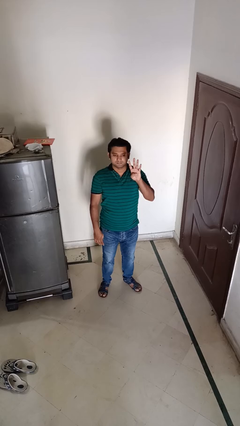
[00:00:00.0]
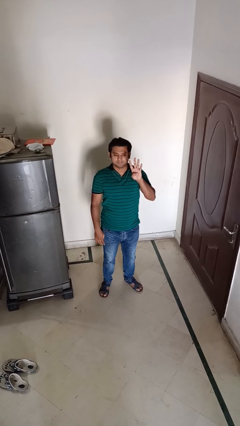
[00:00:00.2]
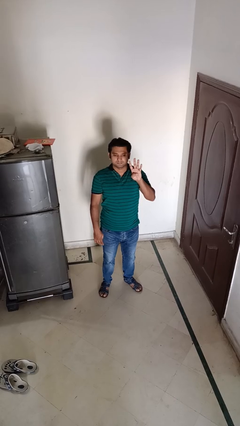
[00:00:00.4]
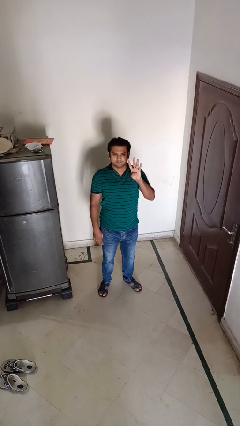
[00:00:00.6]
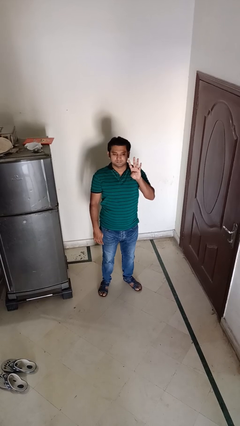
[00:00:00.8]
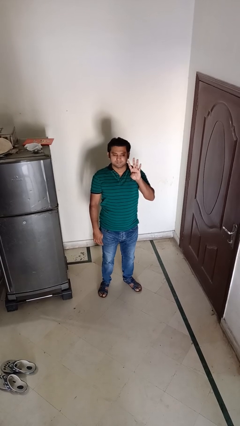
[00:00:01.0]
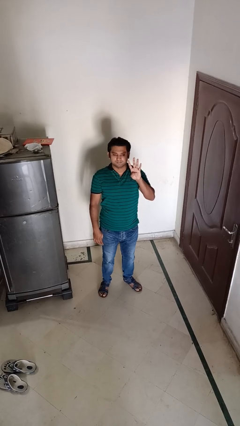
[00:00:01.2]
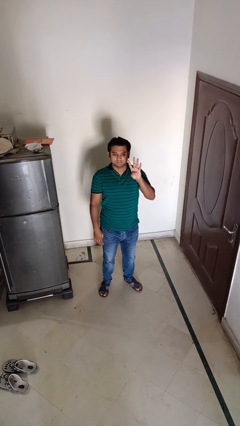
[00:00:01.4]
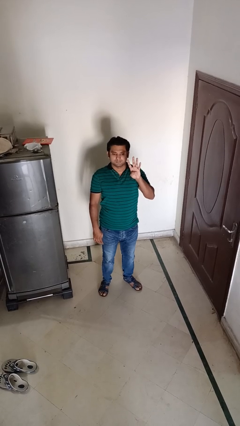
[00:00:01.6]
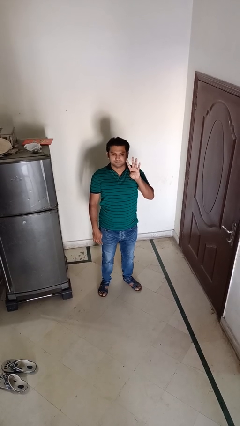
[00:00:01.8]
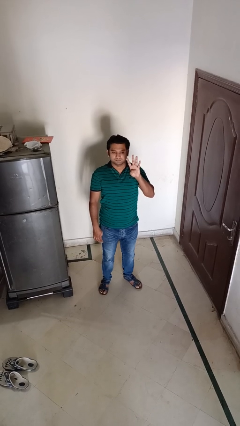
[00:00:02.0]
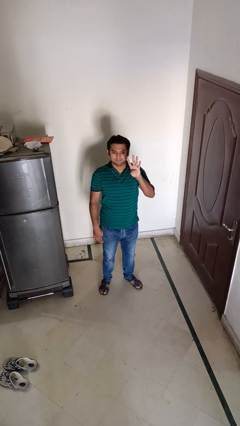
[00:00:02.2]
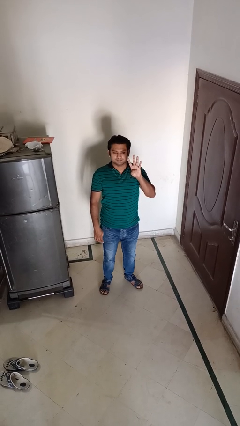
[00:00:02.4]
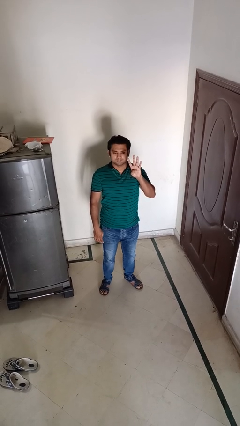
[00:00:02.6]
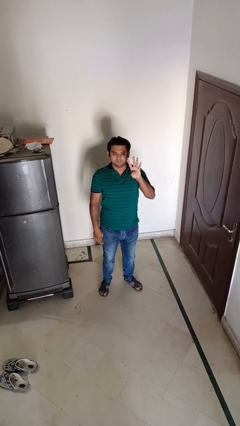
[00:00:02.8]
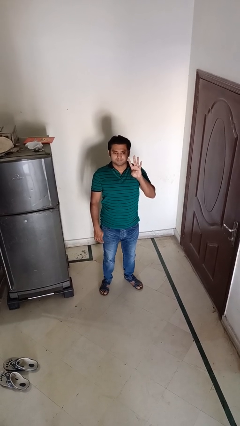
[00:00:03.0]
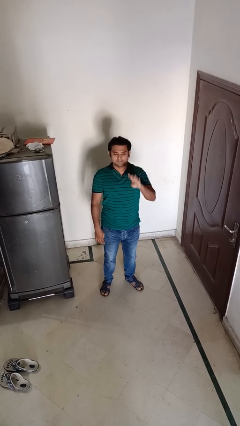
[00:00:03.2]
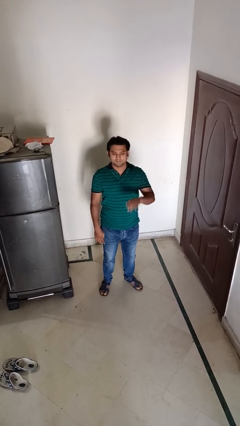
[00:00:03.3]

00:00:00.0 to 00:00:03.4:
person gestures number four

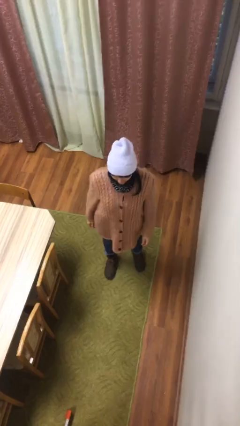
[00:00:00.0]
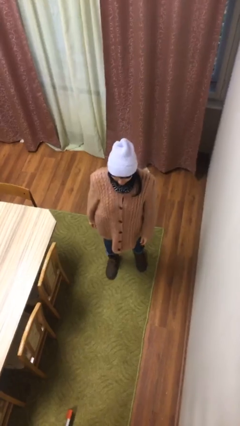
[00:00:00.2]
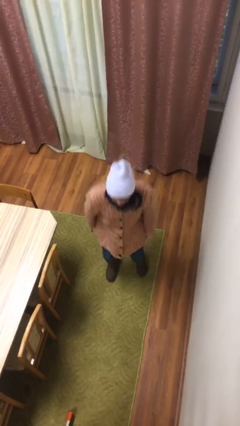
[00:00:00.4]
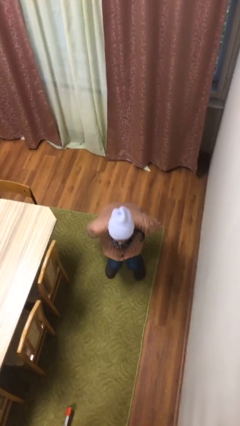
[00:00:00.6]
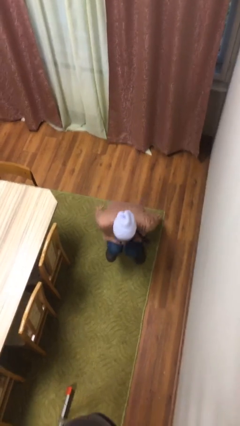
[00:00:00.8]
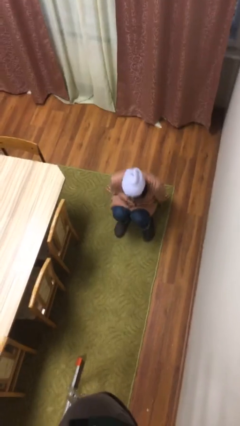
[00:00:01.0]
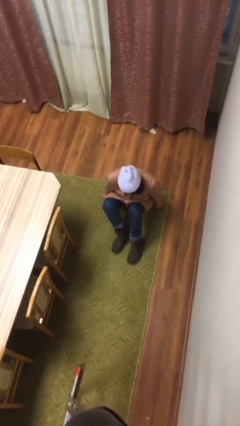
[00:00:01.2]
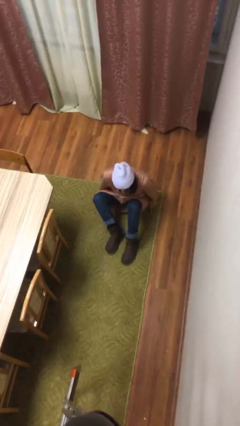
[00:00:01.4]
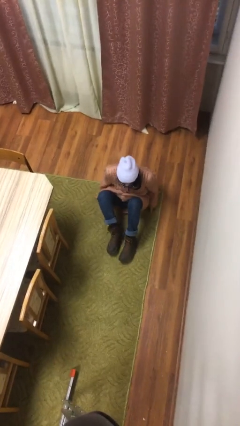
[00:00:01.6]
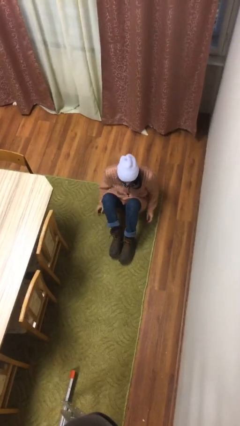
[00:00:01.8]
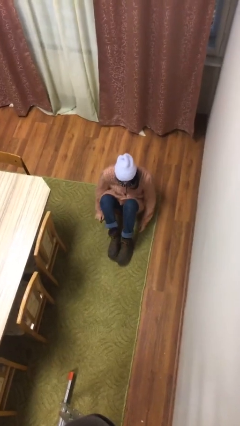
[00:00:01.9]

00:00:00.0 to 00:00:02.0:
person sits down

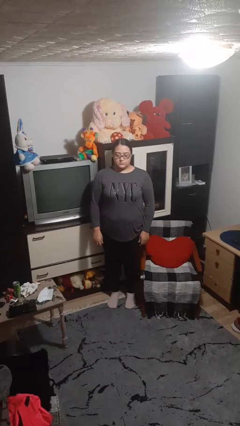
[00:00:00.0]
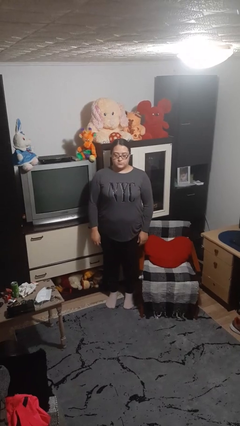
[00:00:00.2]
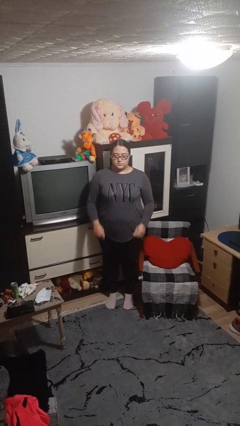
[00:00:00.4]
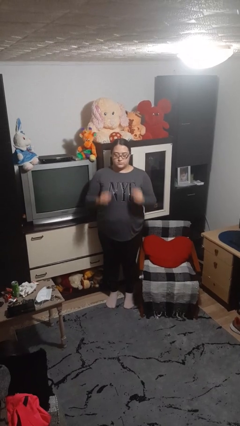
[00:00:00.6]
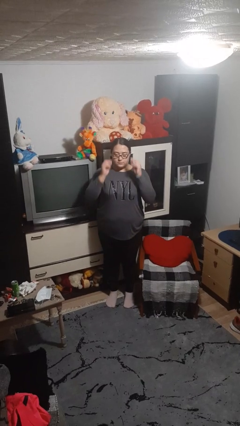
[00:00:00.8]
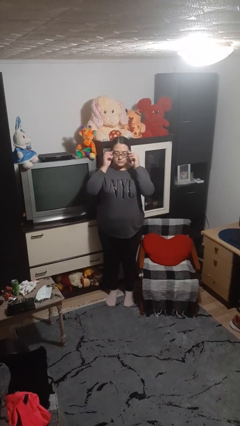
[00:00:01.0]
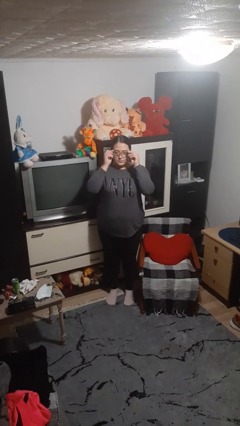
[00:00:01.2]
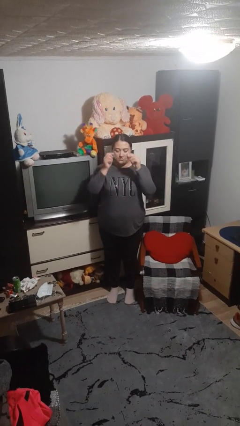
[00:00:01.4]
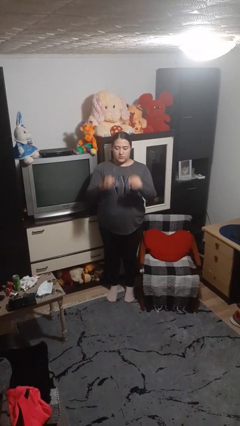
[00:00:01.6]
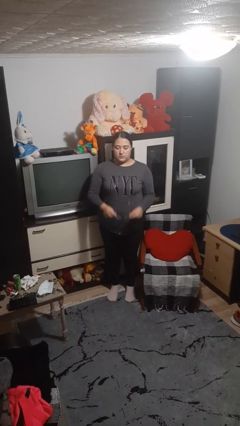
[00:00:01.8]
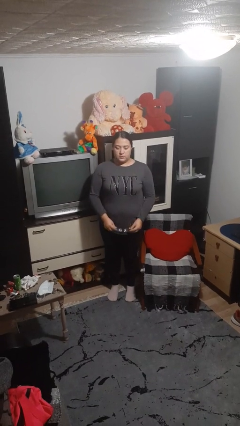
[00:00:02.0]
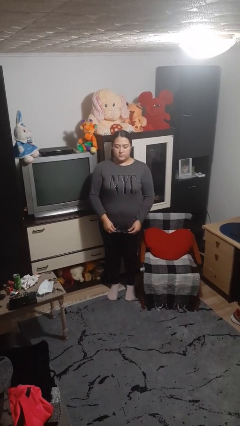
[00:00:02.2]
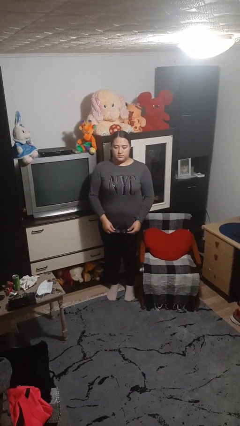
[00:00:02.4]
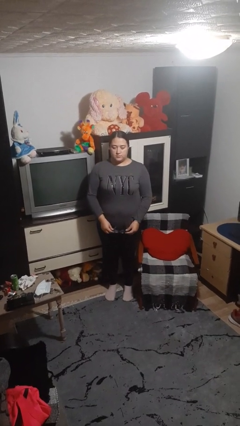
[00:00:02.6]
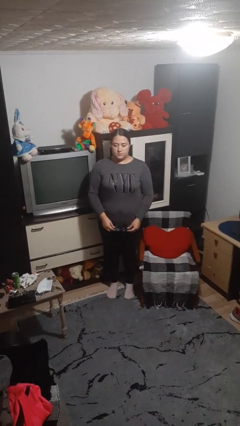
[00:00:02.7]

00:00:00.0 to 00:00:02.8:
person takes off glasses

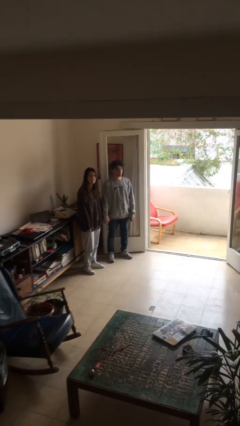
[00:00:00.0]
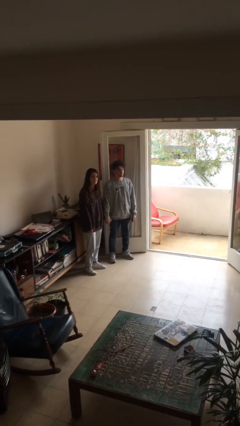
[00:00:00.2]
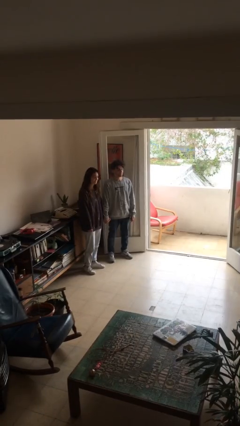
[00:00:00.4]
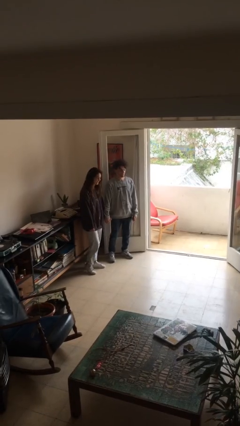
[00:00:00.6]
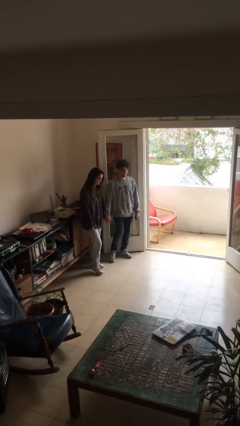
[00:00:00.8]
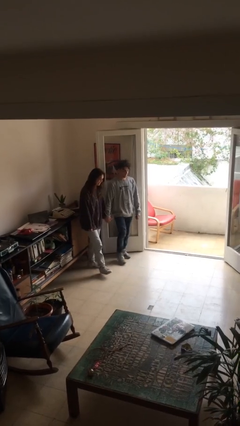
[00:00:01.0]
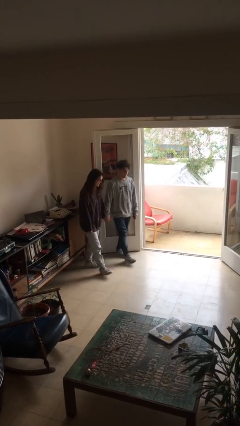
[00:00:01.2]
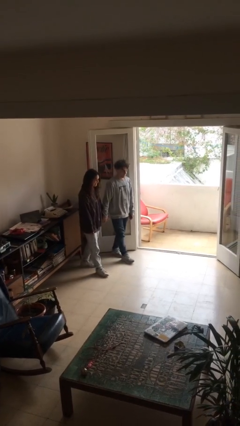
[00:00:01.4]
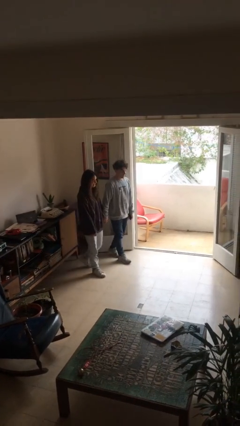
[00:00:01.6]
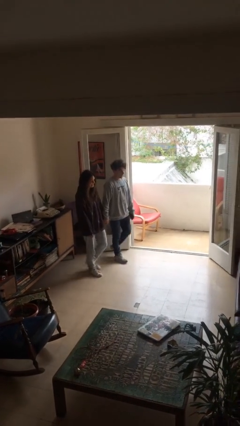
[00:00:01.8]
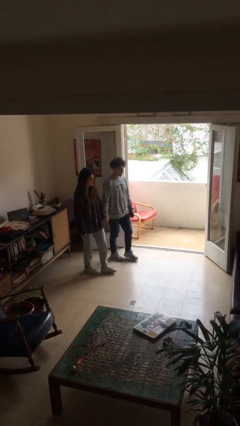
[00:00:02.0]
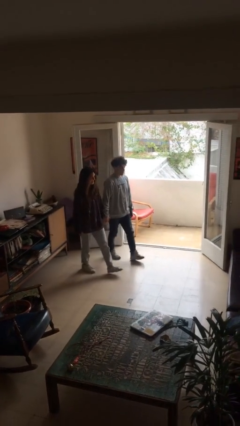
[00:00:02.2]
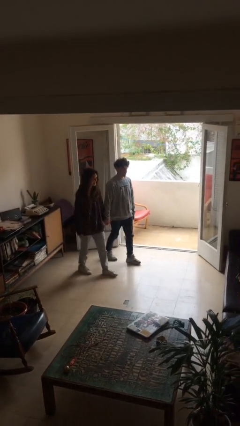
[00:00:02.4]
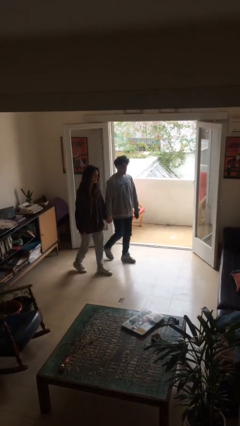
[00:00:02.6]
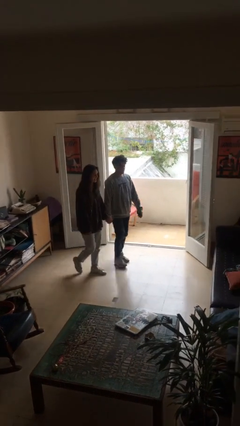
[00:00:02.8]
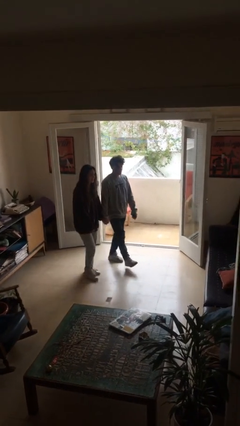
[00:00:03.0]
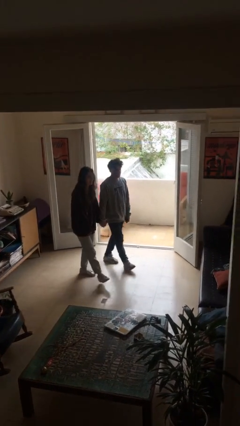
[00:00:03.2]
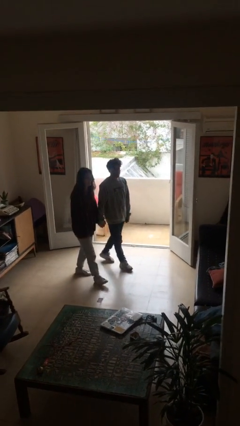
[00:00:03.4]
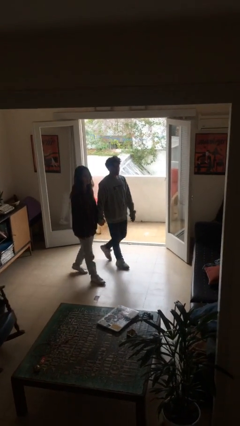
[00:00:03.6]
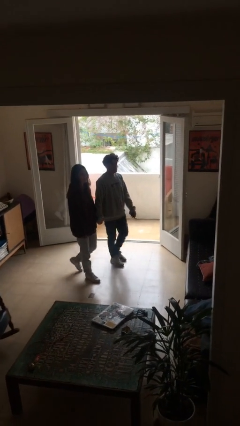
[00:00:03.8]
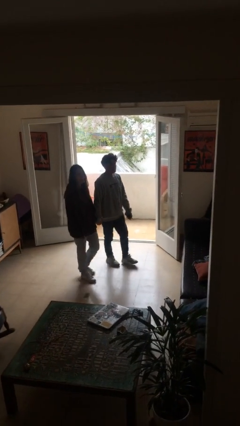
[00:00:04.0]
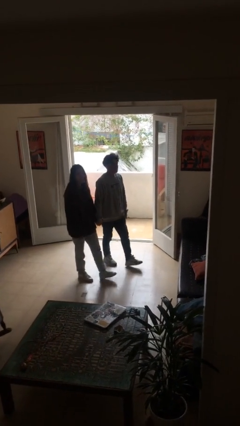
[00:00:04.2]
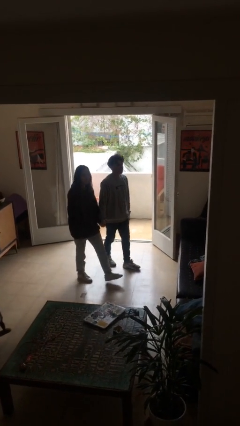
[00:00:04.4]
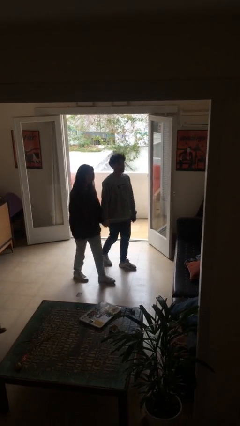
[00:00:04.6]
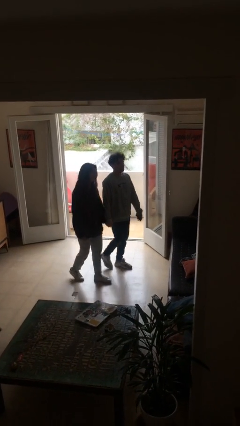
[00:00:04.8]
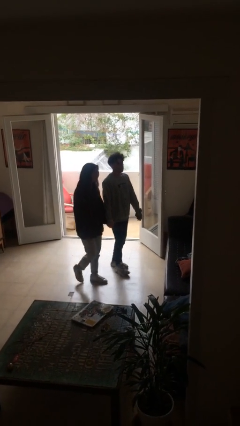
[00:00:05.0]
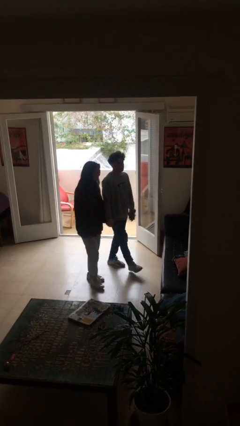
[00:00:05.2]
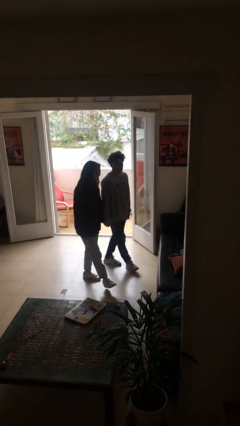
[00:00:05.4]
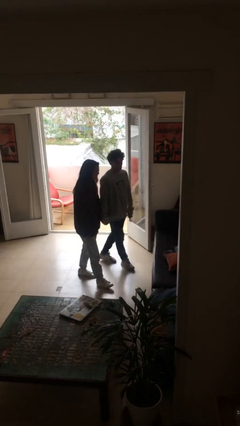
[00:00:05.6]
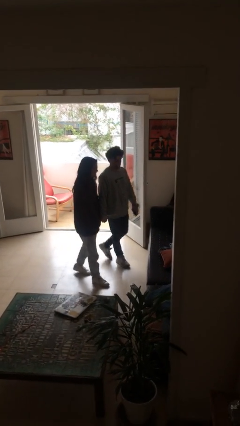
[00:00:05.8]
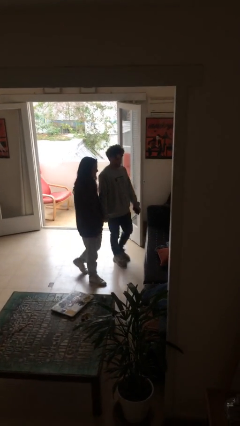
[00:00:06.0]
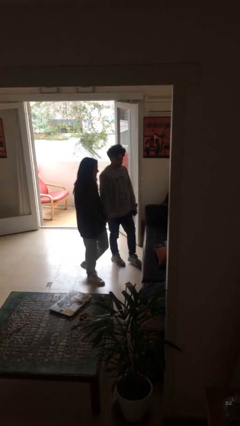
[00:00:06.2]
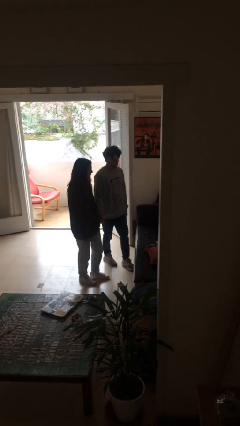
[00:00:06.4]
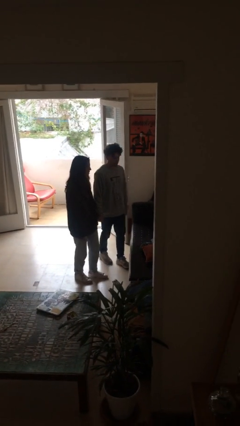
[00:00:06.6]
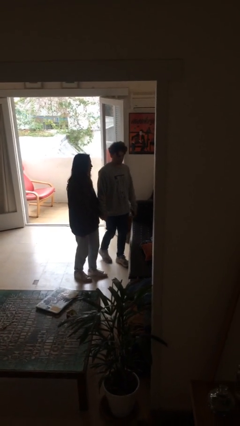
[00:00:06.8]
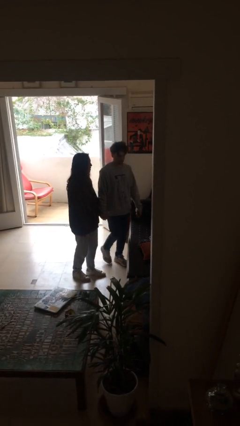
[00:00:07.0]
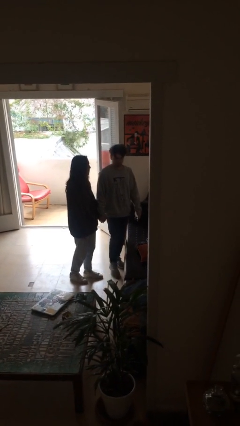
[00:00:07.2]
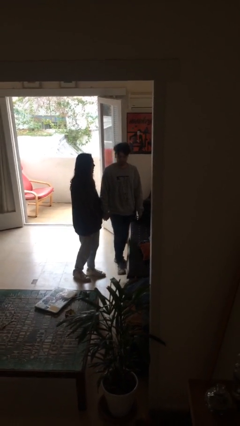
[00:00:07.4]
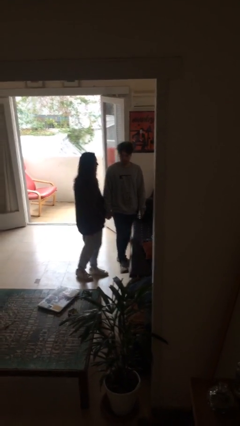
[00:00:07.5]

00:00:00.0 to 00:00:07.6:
person holds hand

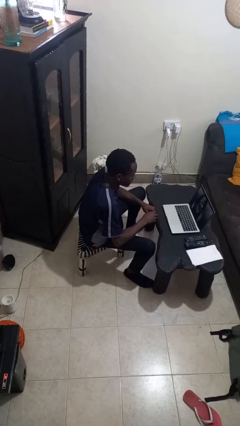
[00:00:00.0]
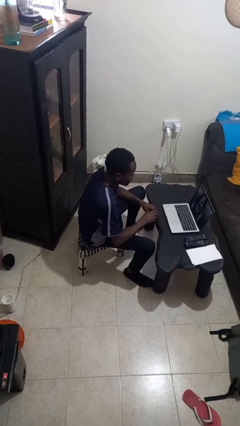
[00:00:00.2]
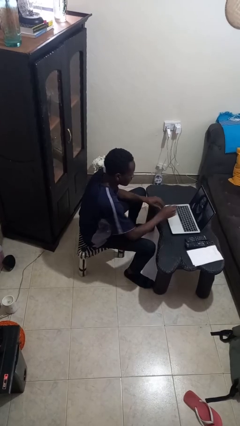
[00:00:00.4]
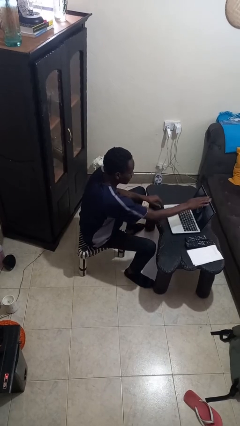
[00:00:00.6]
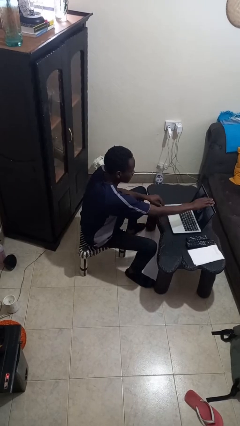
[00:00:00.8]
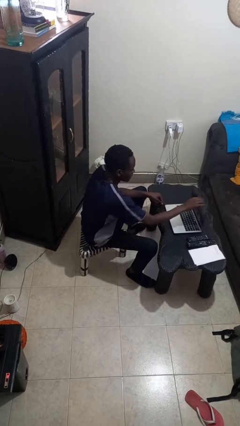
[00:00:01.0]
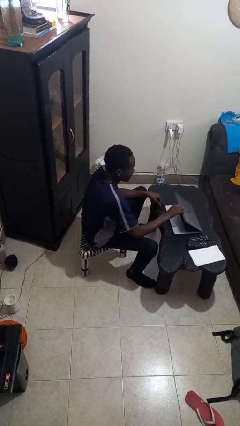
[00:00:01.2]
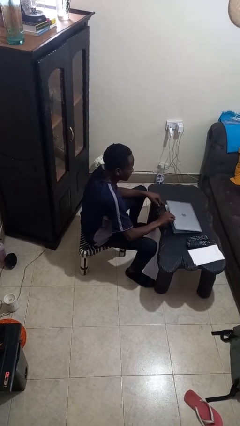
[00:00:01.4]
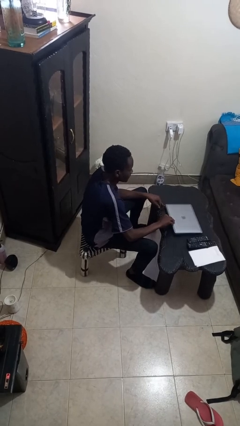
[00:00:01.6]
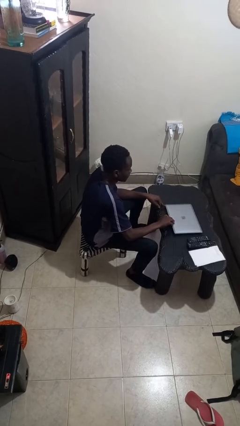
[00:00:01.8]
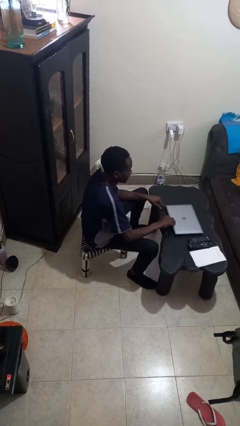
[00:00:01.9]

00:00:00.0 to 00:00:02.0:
person closes laptop
